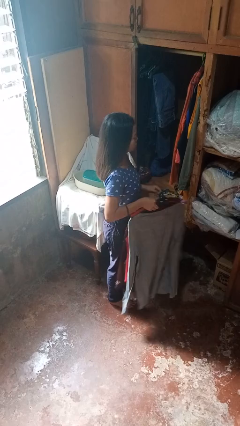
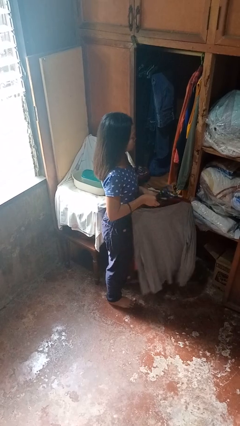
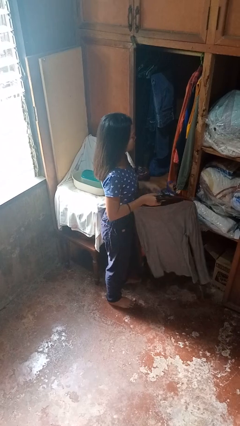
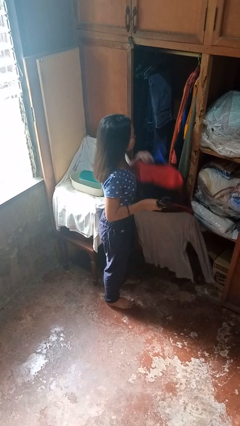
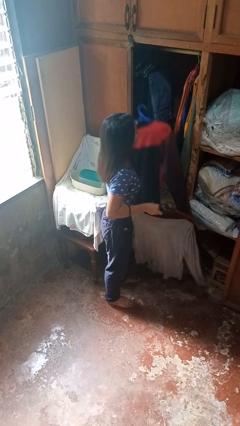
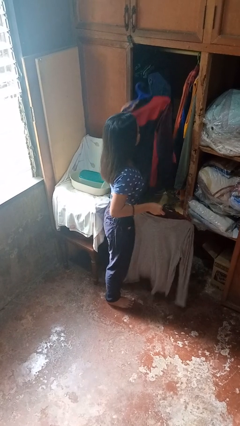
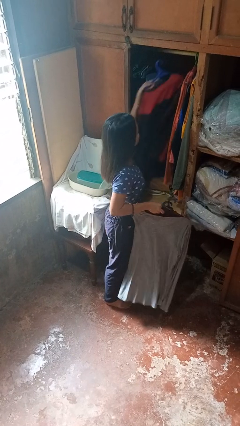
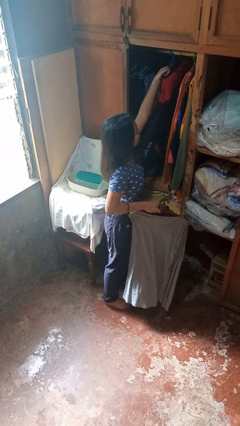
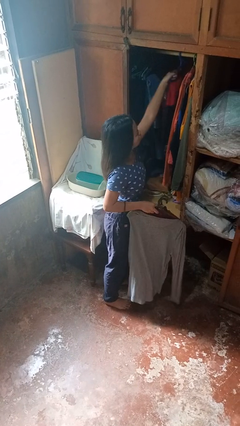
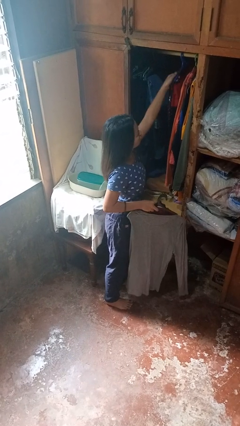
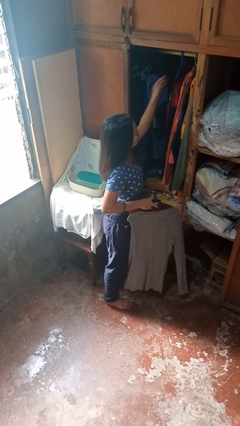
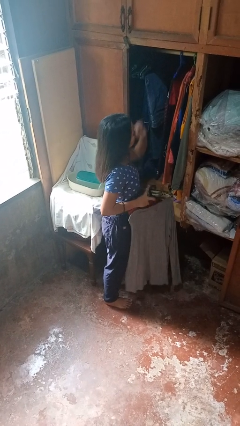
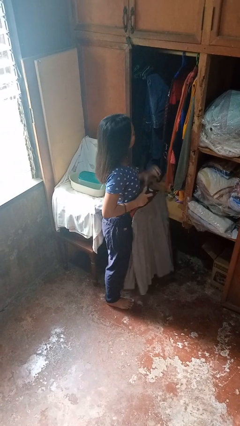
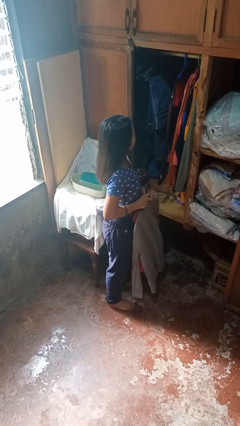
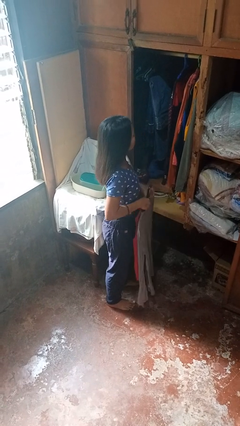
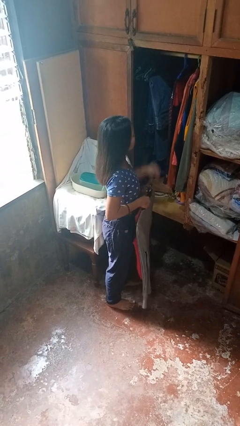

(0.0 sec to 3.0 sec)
person puts clothes into closet

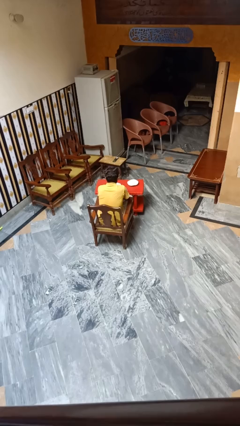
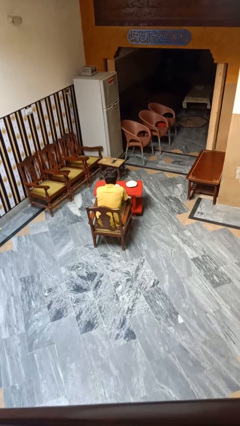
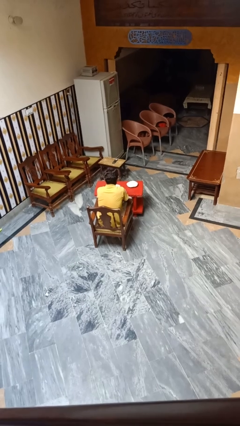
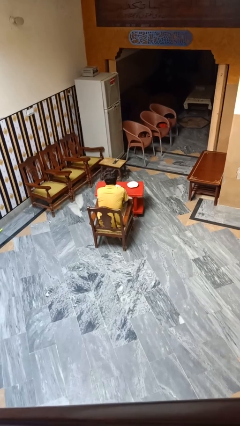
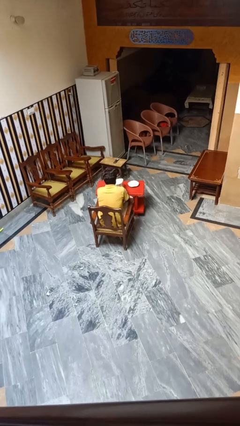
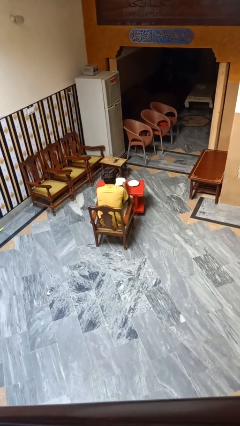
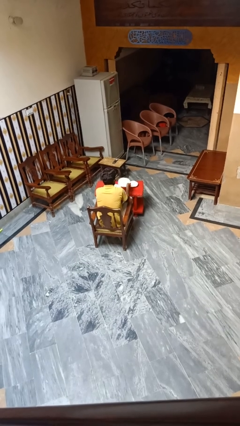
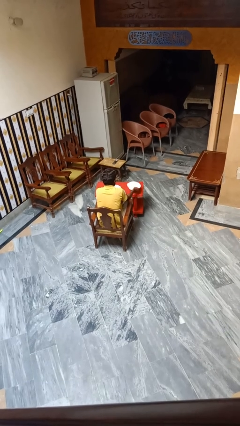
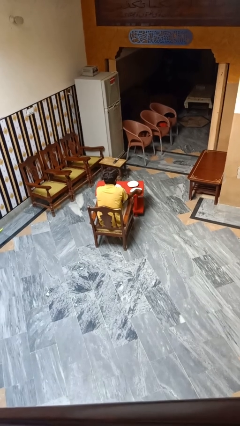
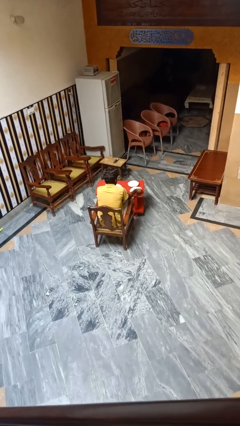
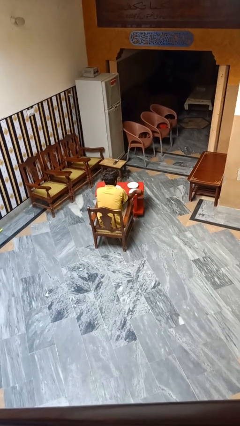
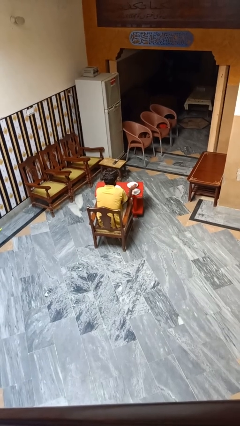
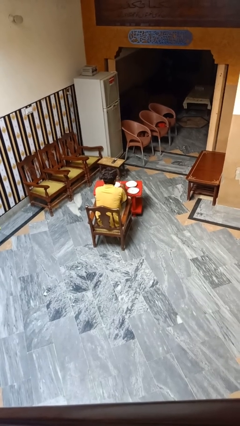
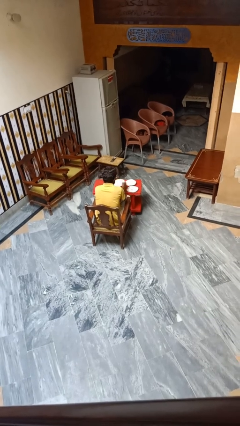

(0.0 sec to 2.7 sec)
person sets table

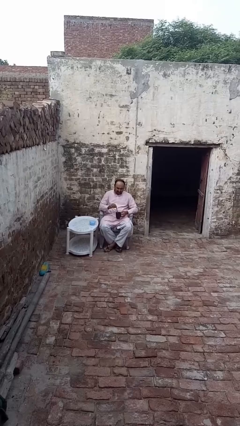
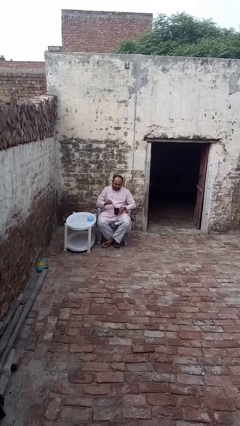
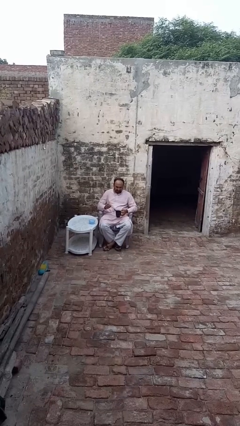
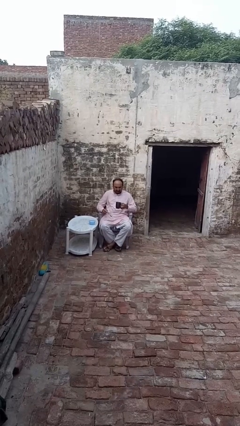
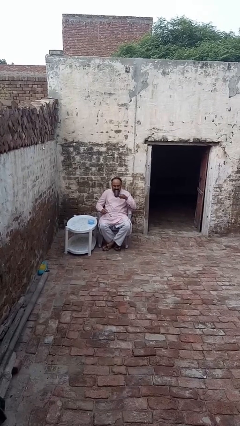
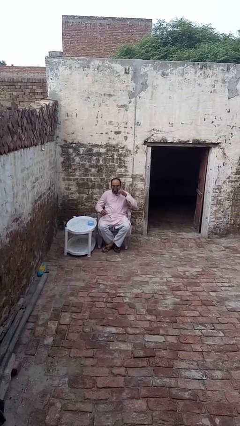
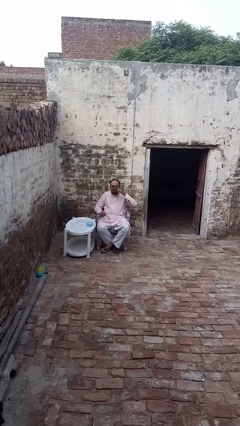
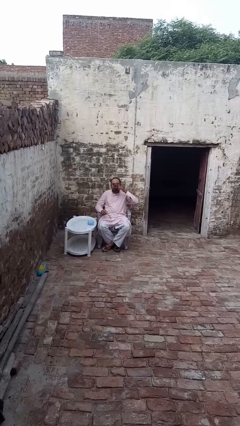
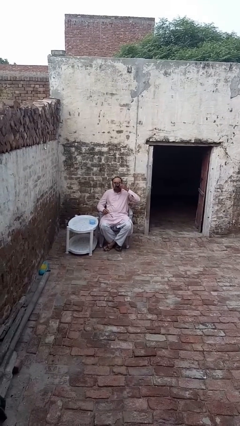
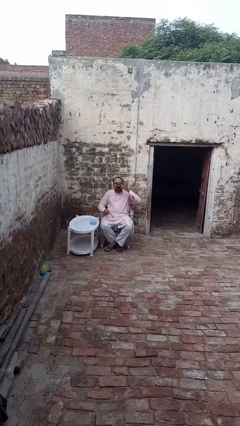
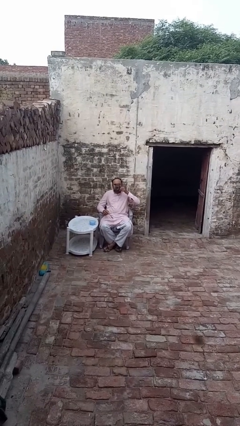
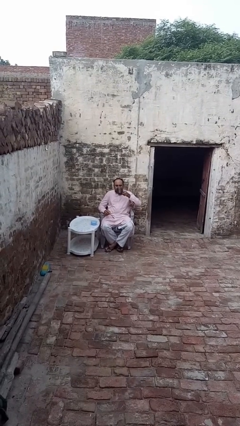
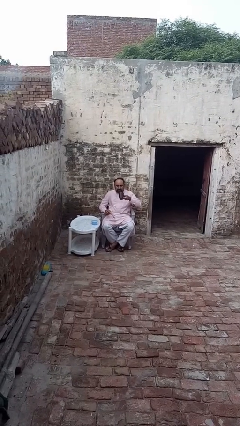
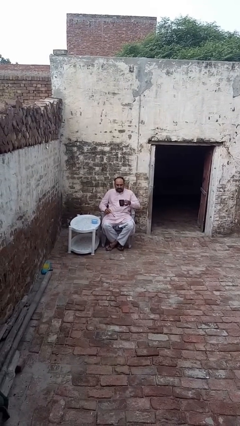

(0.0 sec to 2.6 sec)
person drinks from mug

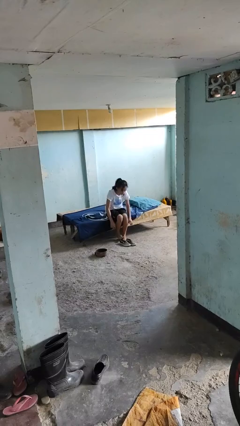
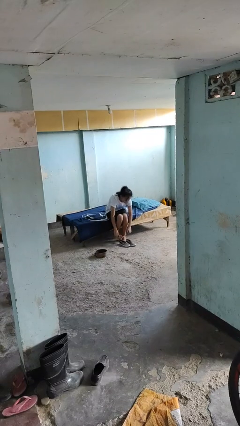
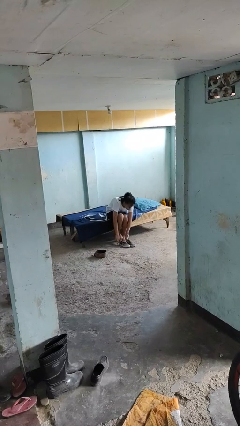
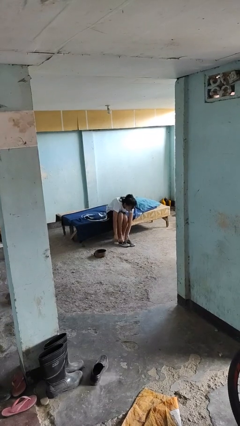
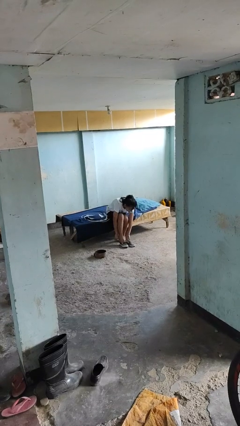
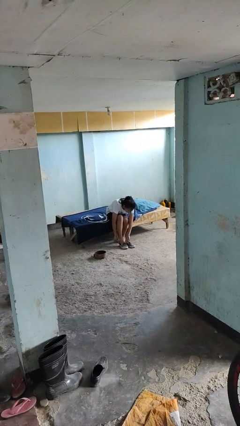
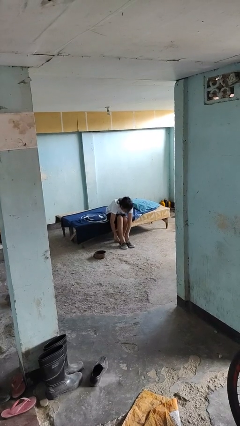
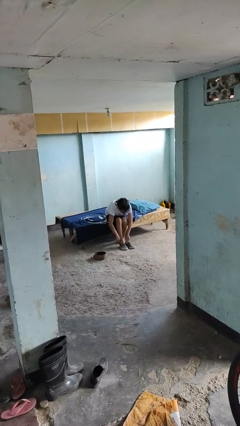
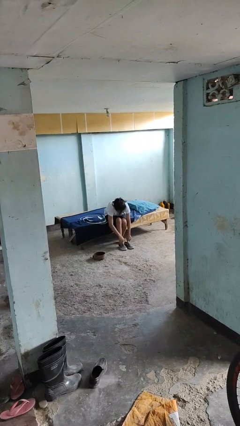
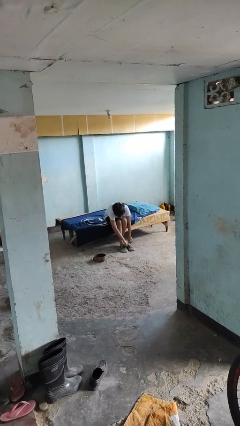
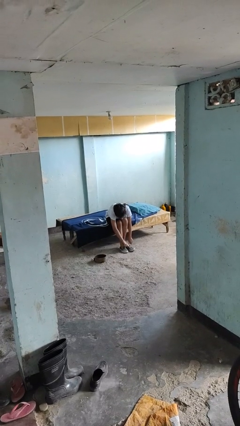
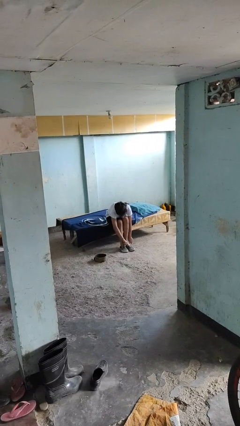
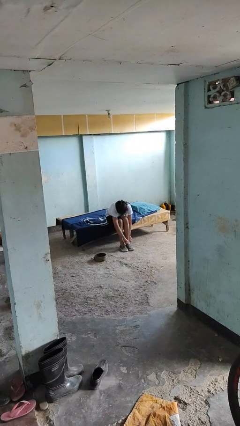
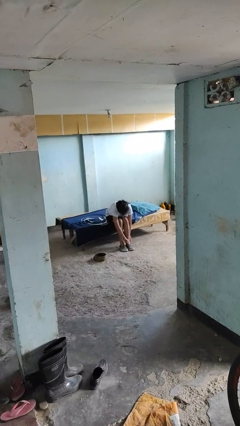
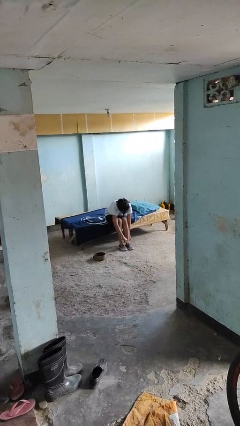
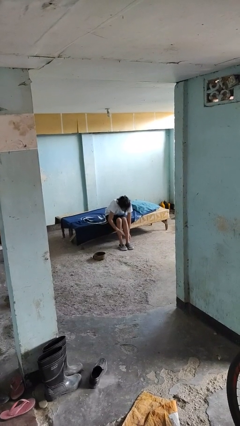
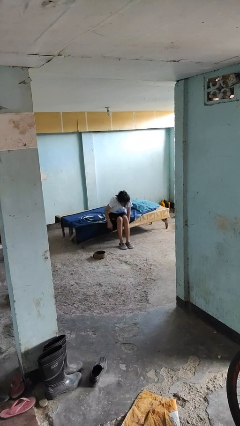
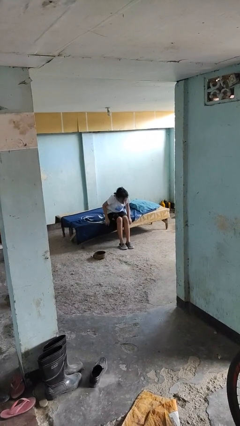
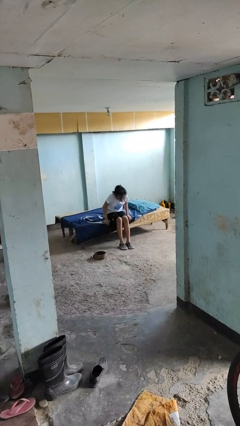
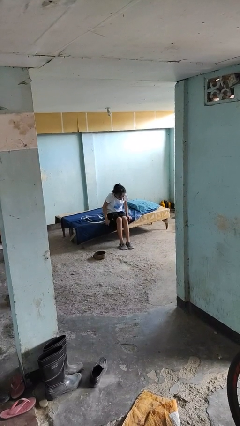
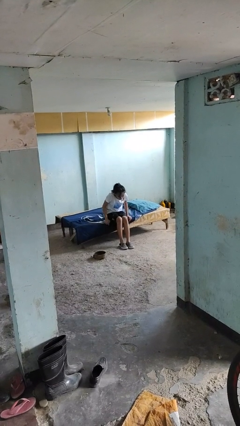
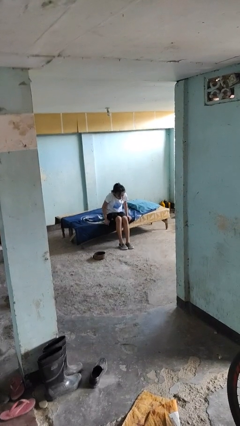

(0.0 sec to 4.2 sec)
person puts on shoes

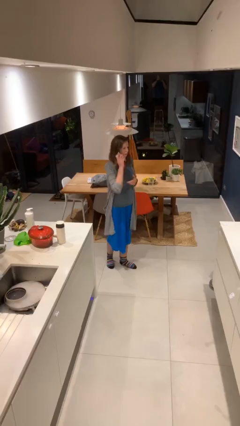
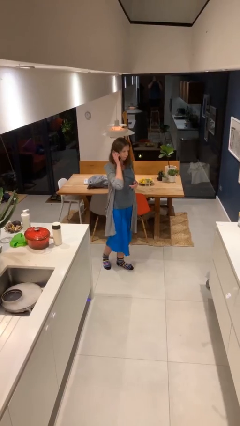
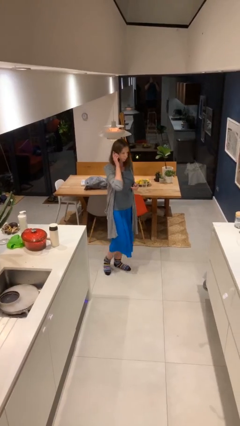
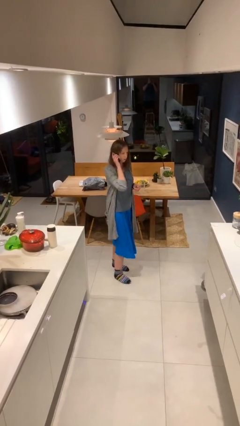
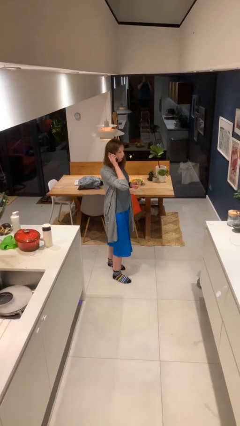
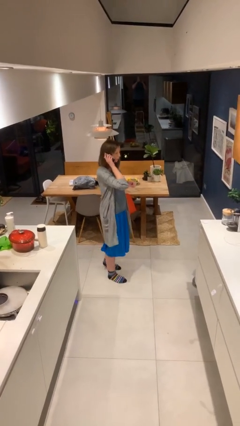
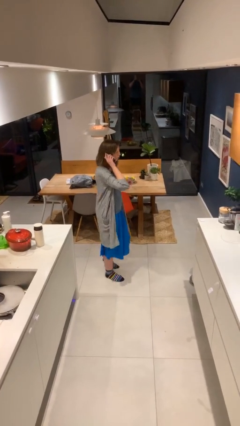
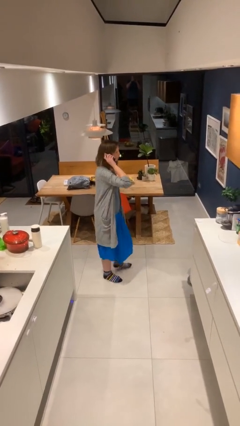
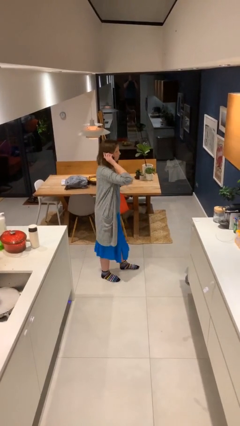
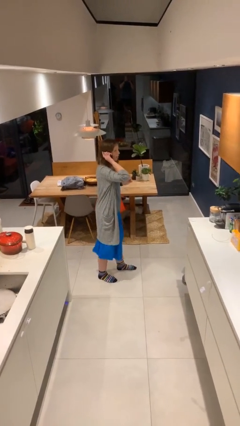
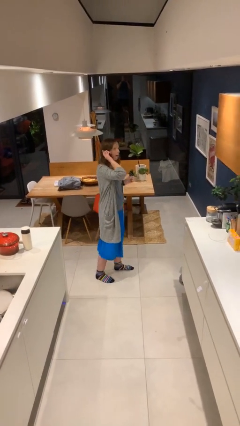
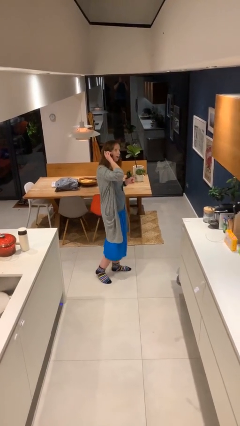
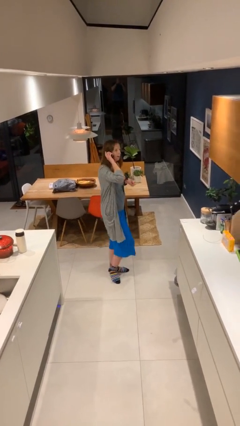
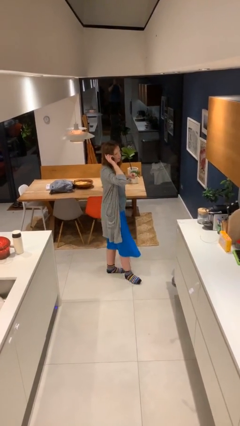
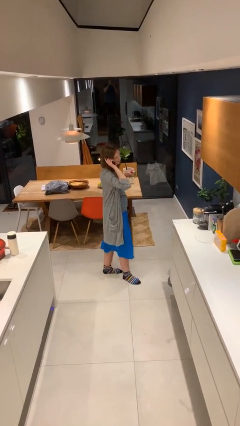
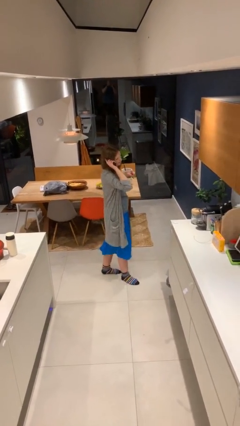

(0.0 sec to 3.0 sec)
person talks on phone

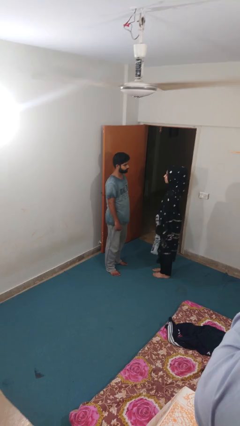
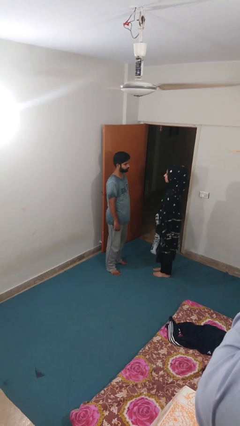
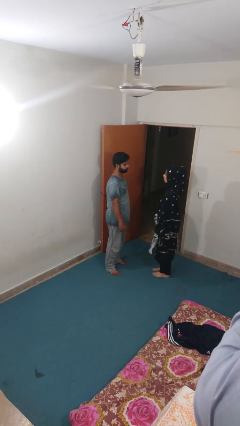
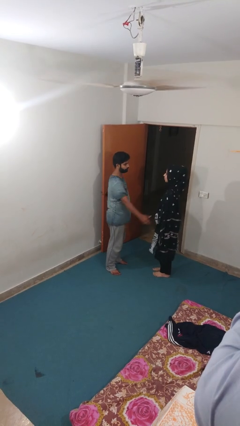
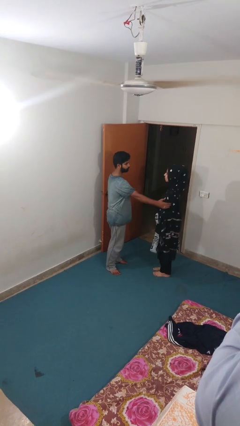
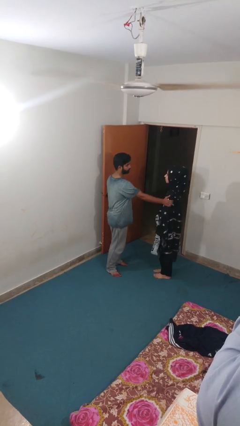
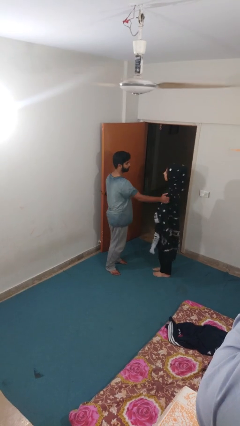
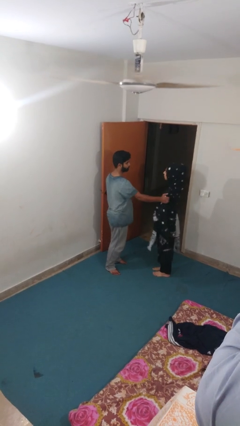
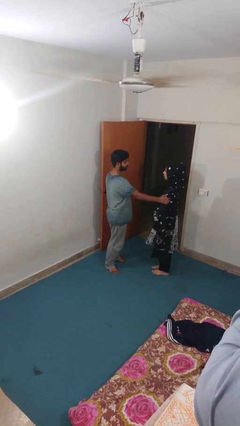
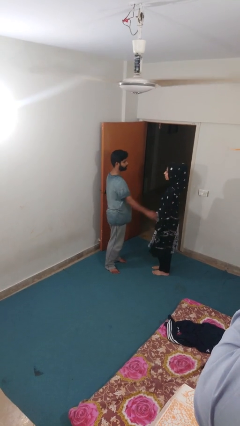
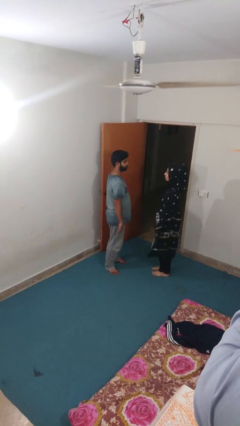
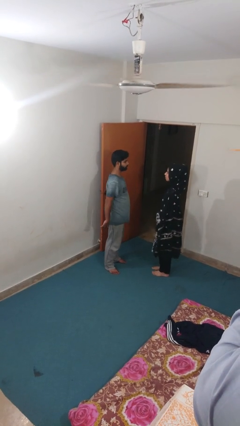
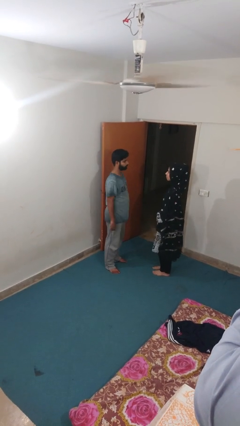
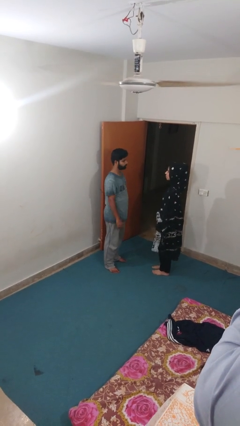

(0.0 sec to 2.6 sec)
person grabs person by bicep
